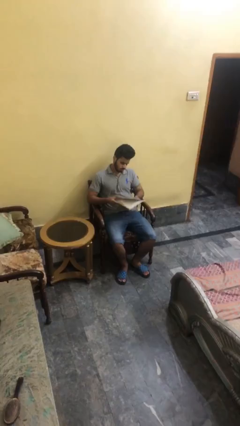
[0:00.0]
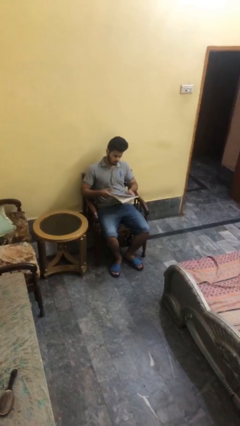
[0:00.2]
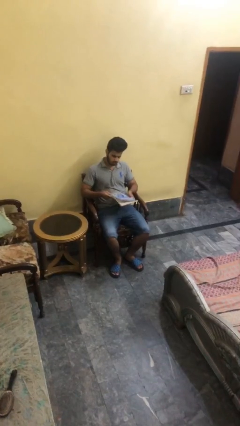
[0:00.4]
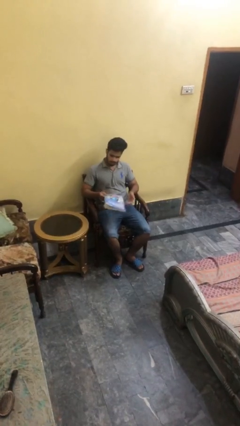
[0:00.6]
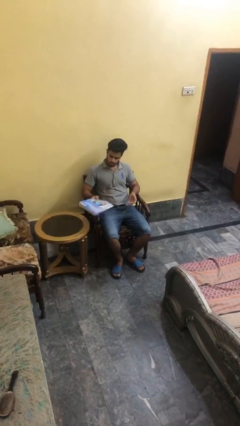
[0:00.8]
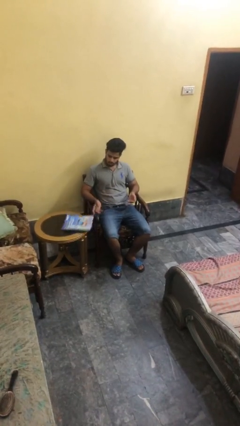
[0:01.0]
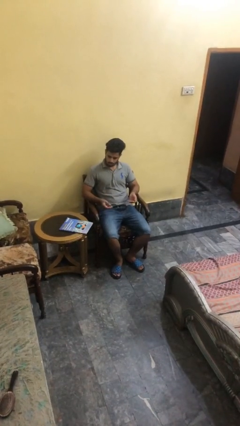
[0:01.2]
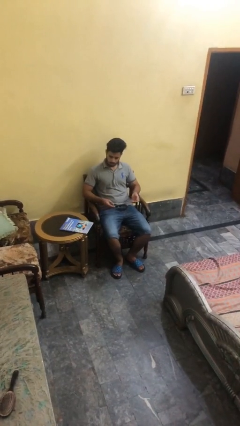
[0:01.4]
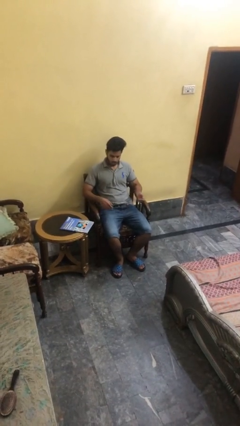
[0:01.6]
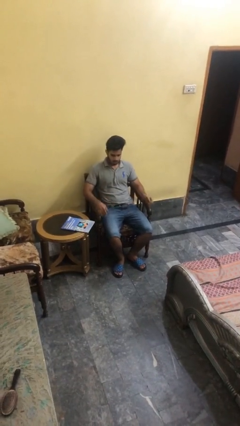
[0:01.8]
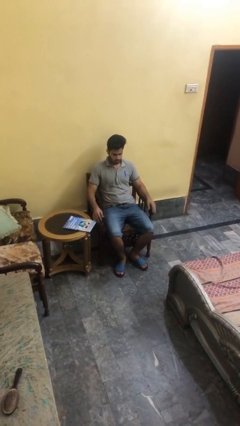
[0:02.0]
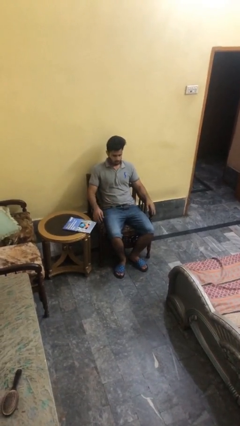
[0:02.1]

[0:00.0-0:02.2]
person puts down object on table

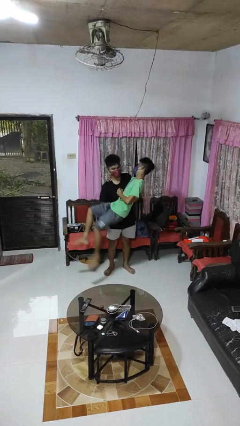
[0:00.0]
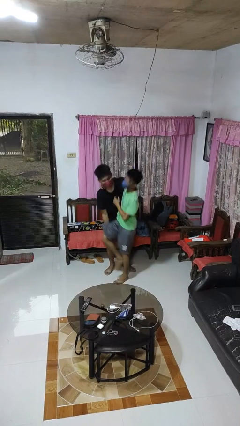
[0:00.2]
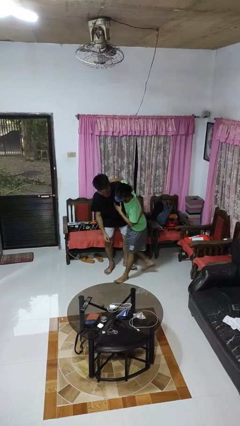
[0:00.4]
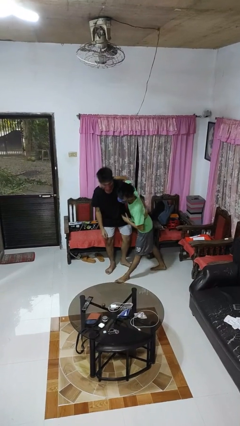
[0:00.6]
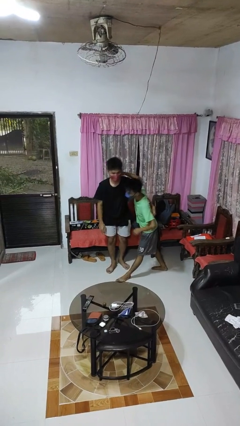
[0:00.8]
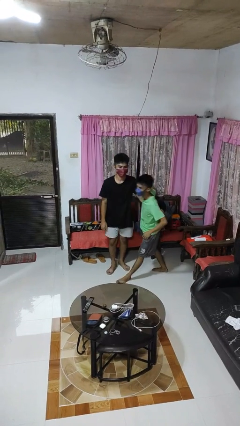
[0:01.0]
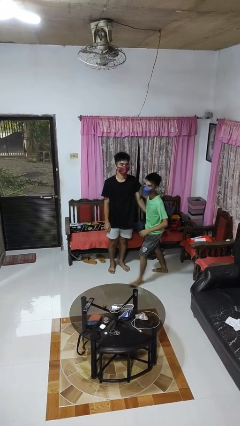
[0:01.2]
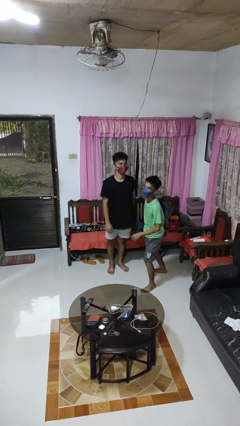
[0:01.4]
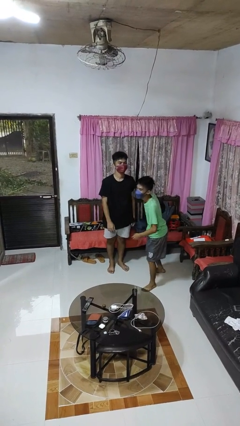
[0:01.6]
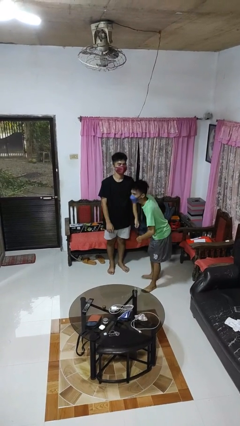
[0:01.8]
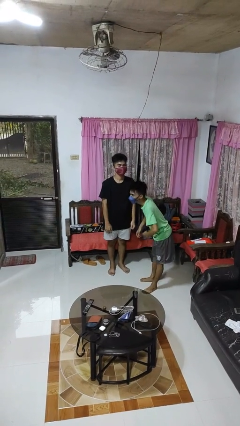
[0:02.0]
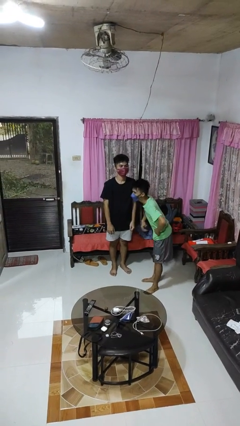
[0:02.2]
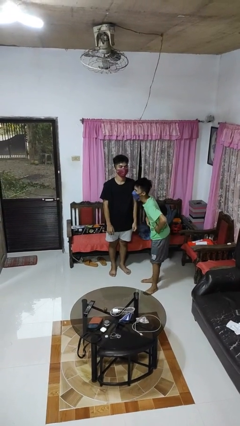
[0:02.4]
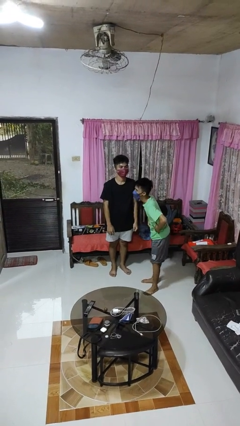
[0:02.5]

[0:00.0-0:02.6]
person puts down person

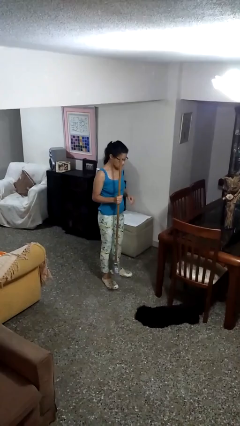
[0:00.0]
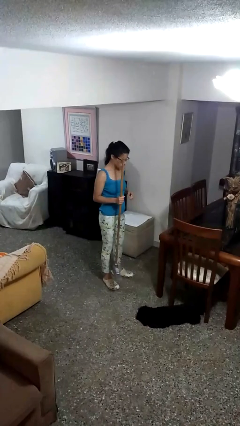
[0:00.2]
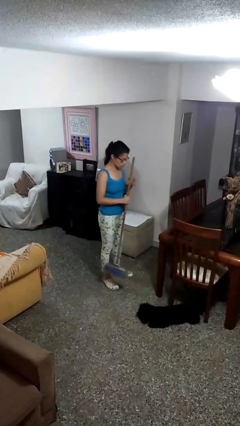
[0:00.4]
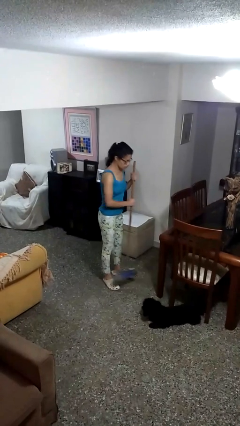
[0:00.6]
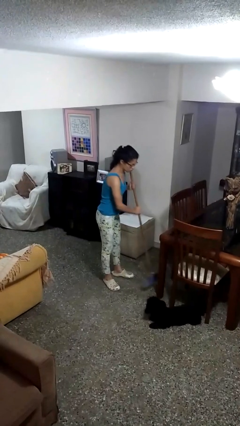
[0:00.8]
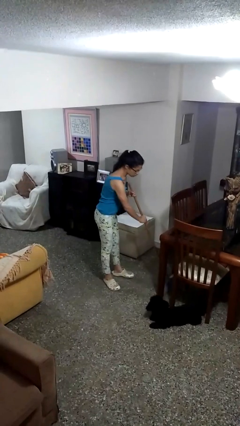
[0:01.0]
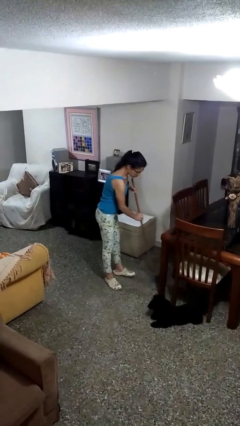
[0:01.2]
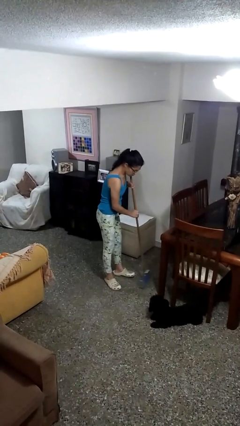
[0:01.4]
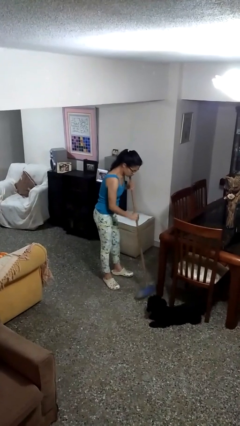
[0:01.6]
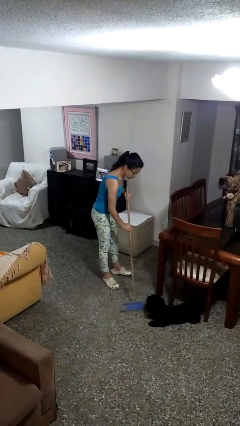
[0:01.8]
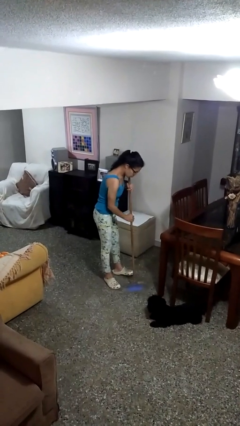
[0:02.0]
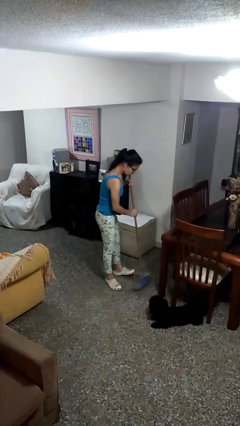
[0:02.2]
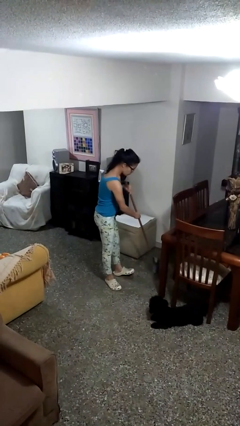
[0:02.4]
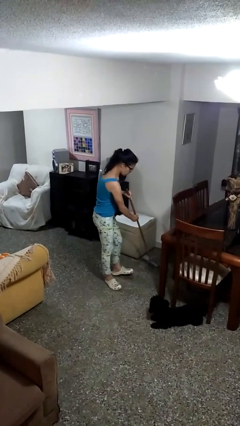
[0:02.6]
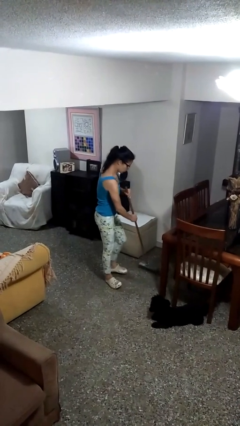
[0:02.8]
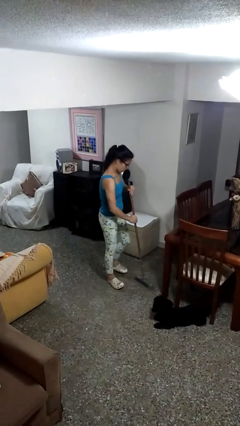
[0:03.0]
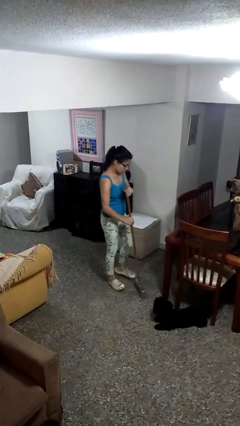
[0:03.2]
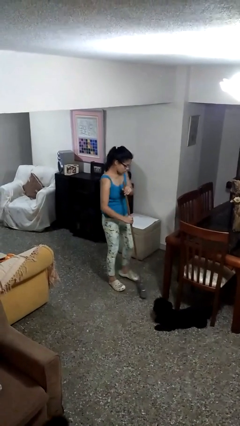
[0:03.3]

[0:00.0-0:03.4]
person sweeps floor

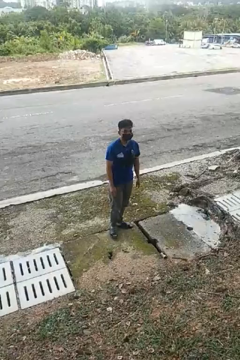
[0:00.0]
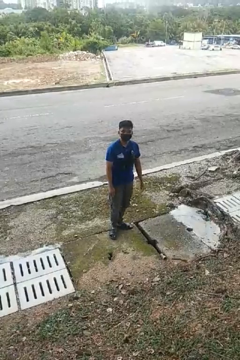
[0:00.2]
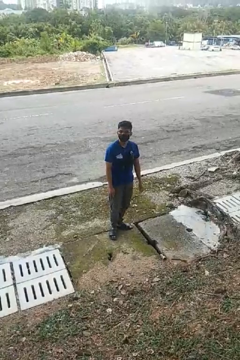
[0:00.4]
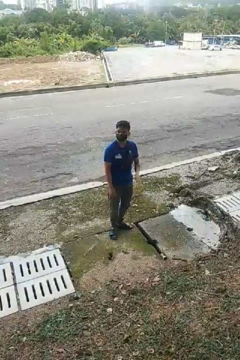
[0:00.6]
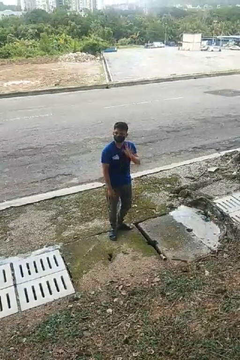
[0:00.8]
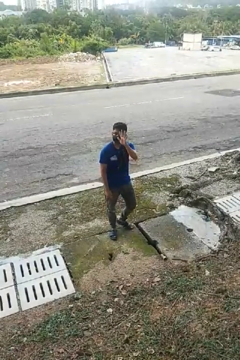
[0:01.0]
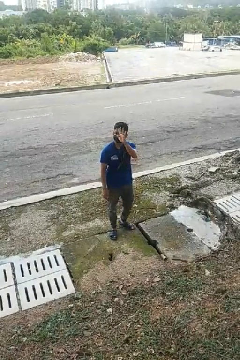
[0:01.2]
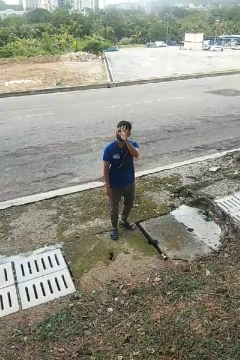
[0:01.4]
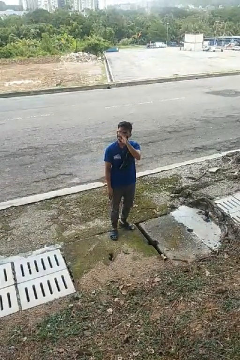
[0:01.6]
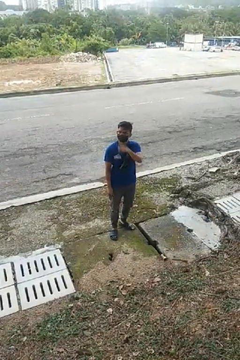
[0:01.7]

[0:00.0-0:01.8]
person gestures number five

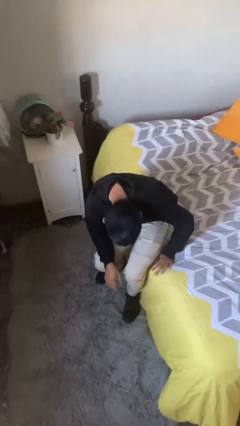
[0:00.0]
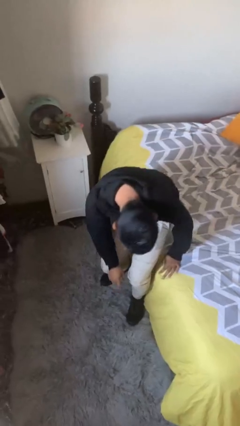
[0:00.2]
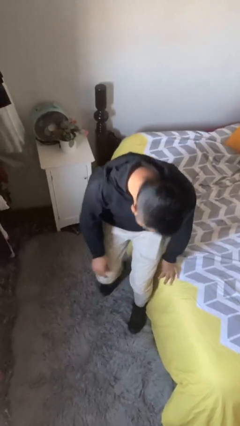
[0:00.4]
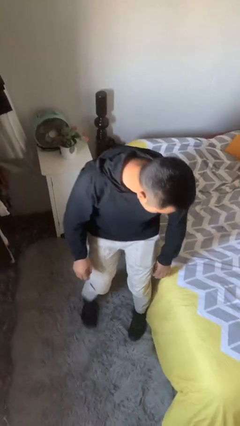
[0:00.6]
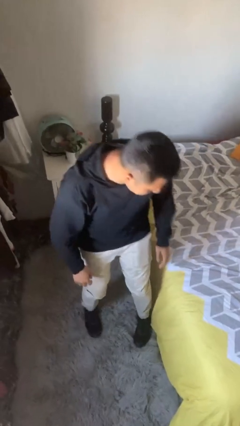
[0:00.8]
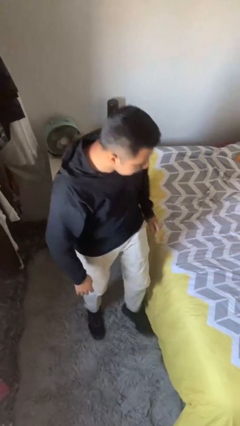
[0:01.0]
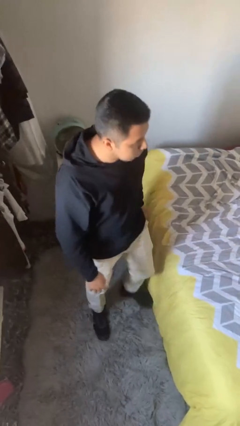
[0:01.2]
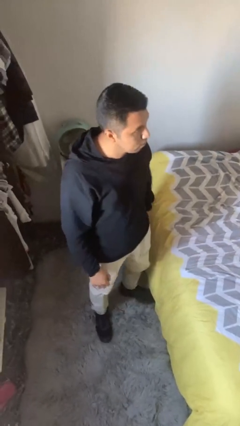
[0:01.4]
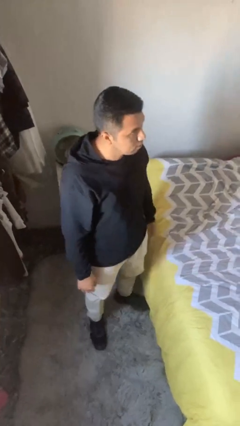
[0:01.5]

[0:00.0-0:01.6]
person stands up

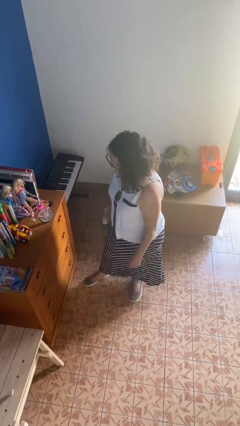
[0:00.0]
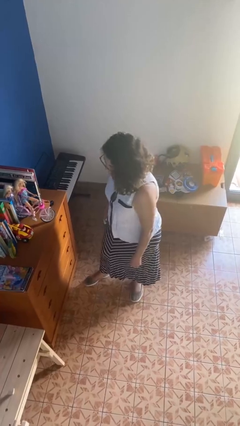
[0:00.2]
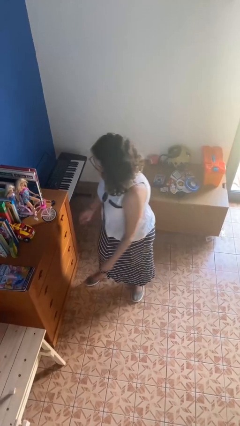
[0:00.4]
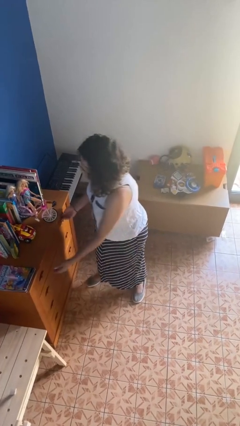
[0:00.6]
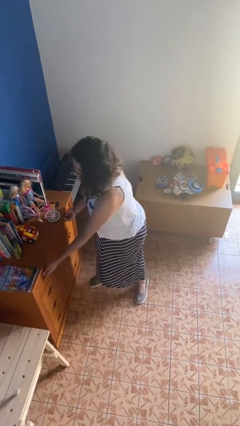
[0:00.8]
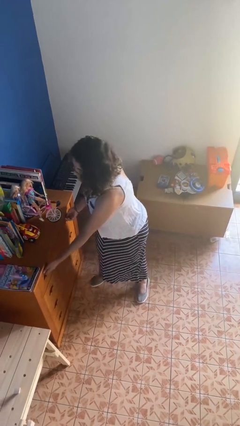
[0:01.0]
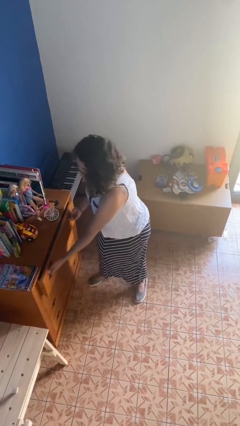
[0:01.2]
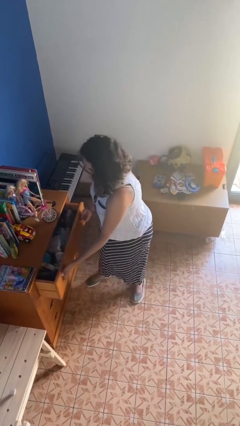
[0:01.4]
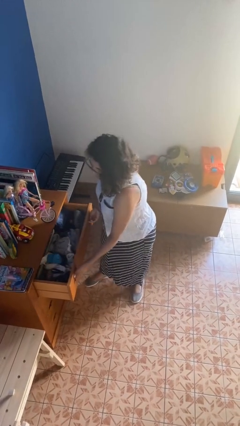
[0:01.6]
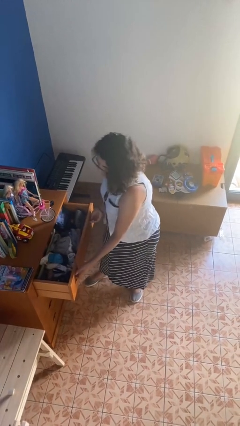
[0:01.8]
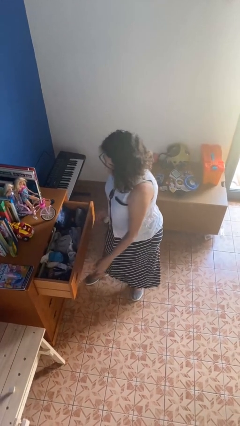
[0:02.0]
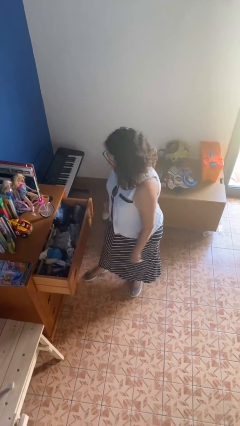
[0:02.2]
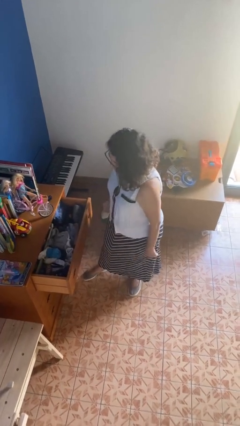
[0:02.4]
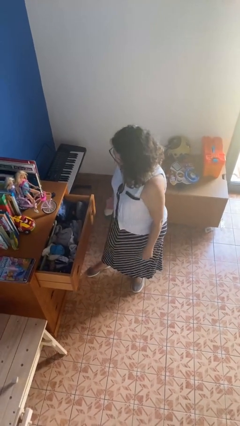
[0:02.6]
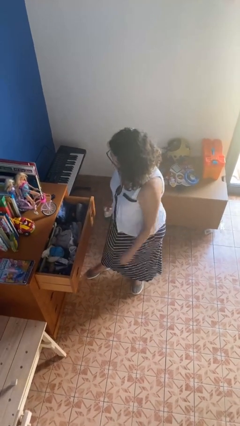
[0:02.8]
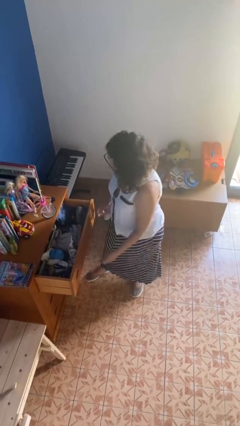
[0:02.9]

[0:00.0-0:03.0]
person opens dresser drawer

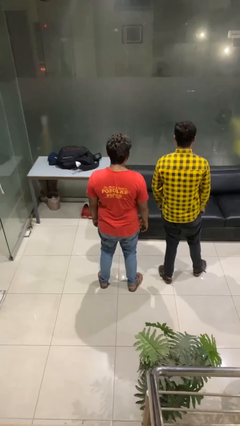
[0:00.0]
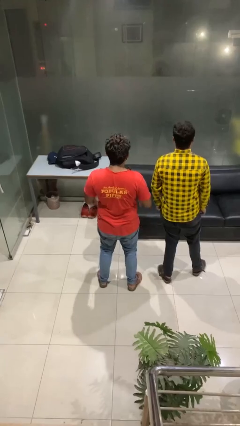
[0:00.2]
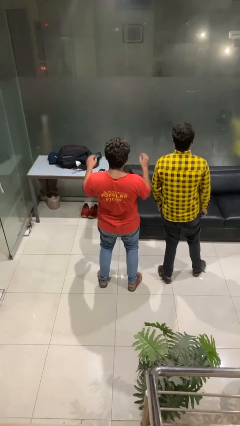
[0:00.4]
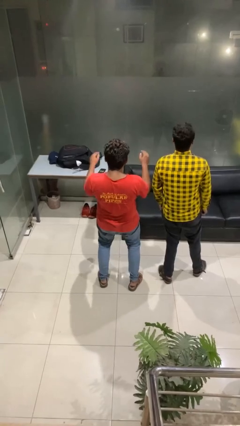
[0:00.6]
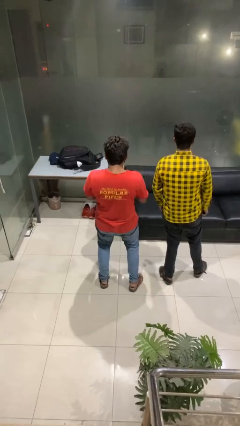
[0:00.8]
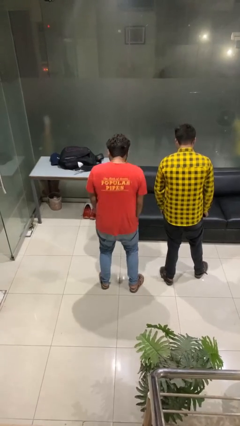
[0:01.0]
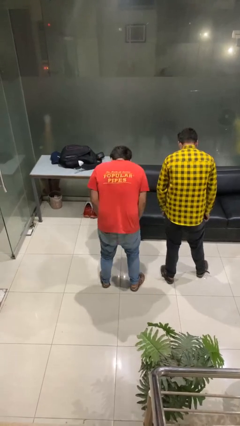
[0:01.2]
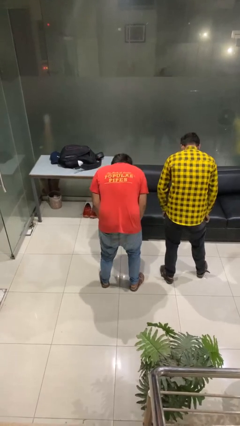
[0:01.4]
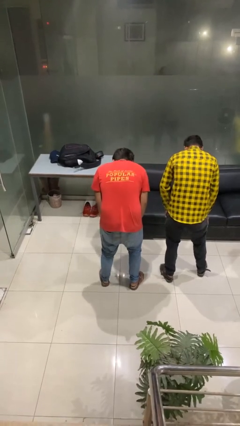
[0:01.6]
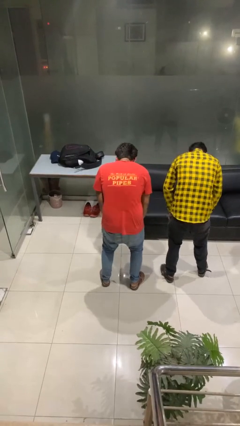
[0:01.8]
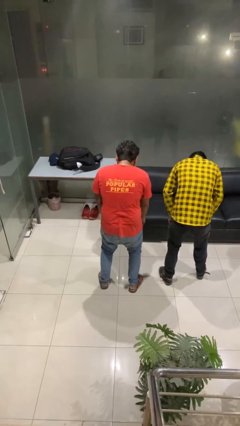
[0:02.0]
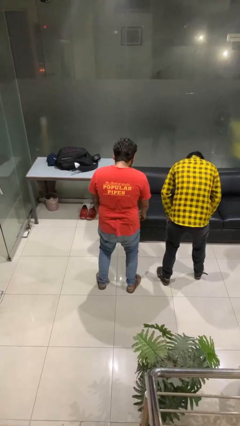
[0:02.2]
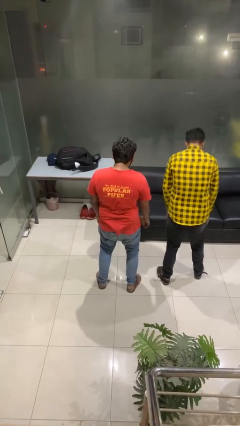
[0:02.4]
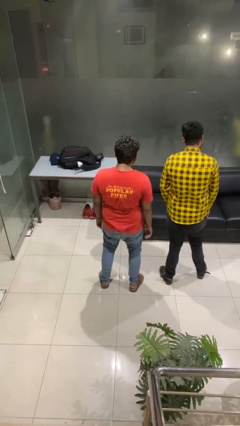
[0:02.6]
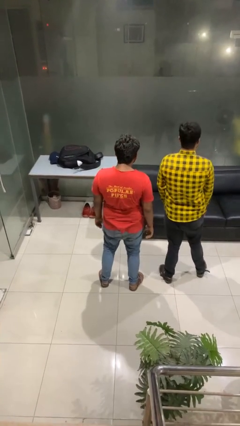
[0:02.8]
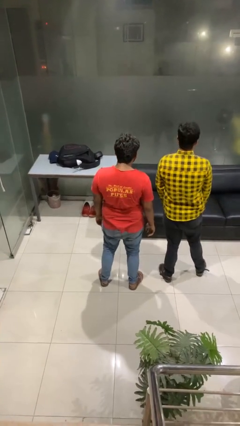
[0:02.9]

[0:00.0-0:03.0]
person laughs with person
